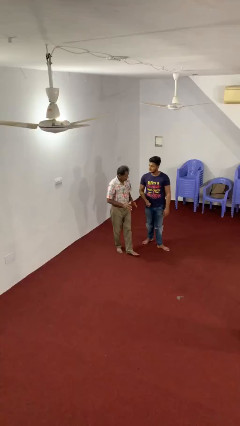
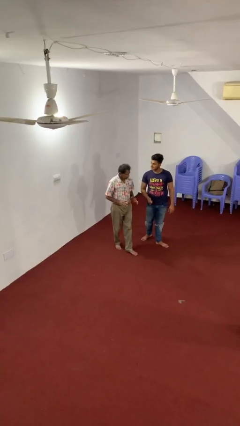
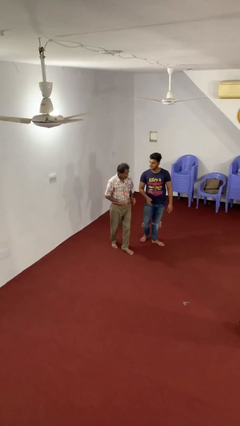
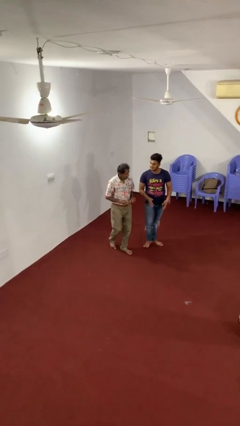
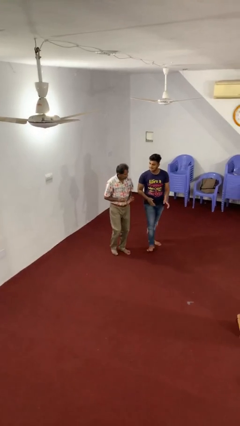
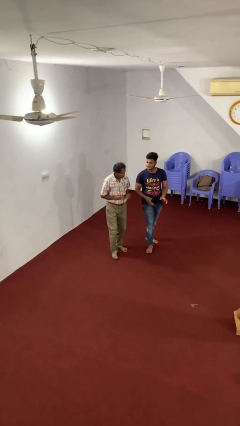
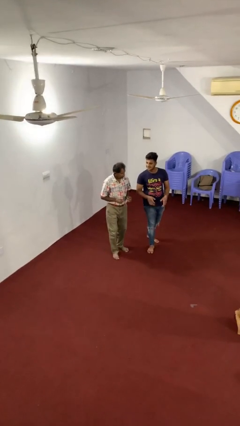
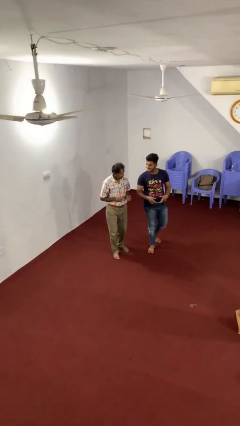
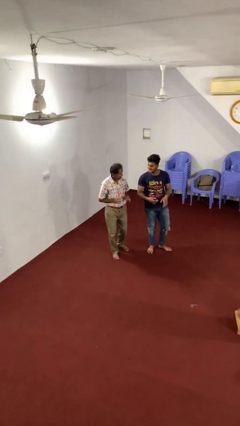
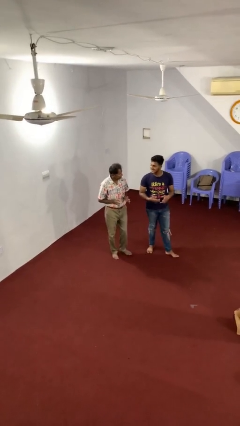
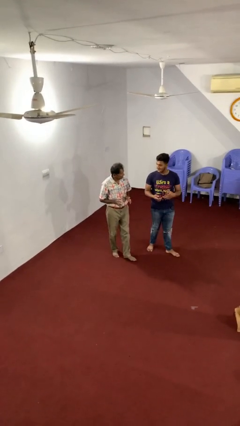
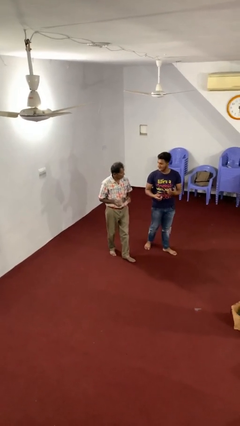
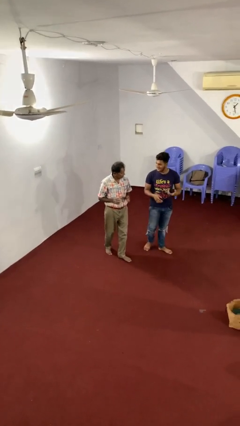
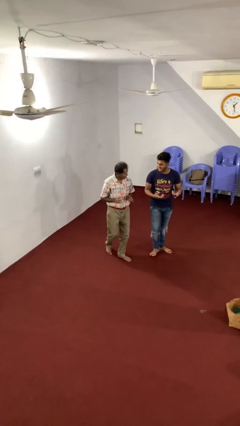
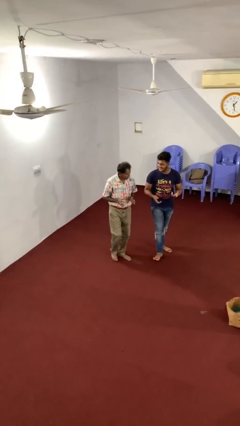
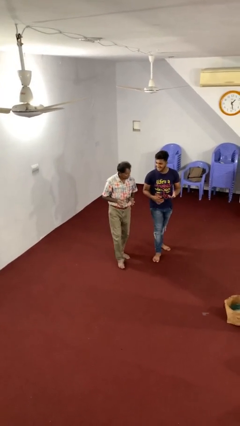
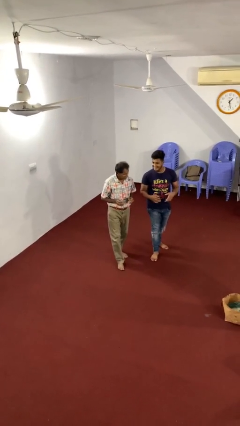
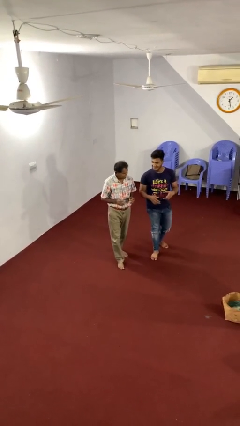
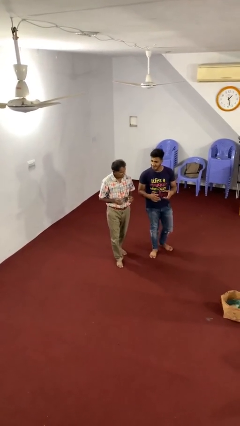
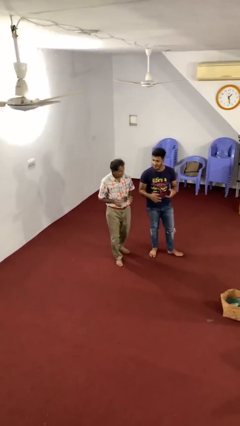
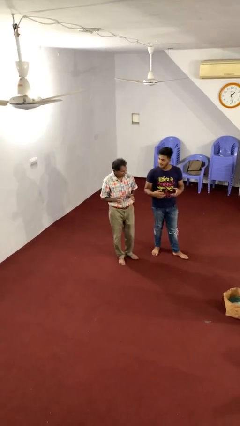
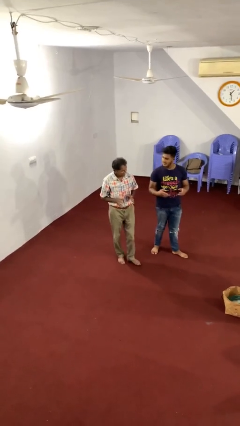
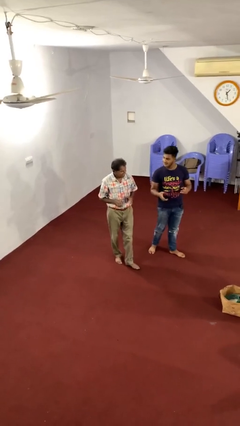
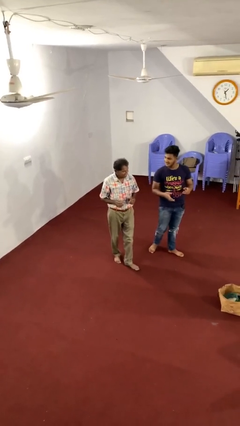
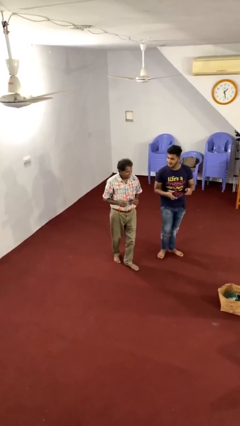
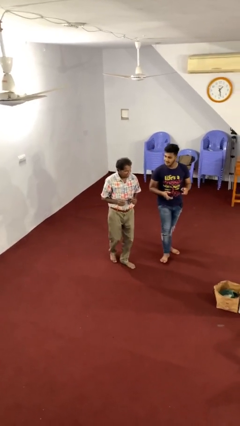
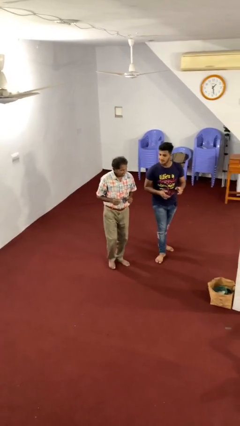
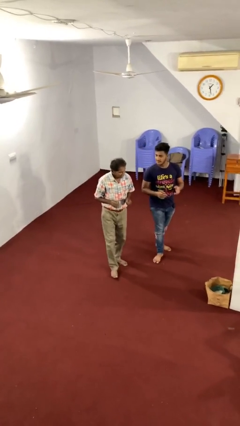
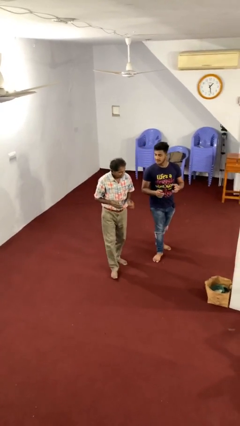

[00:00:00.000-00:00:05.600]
person talks to person

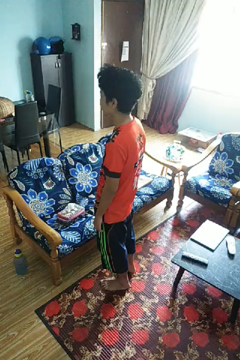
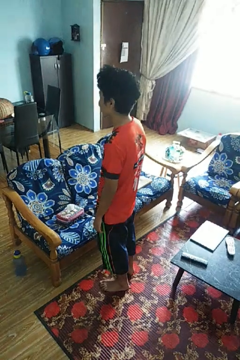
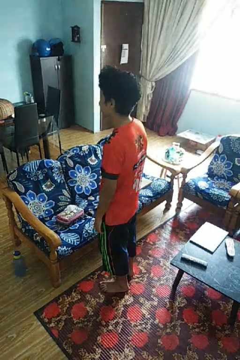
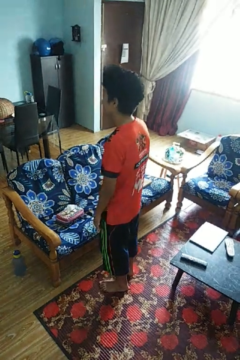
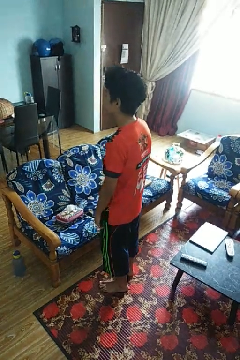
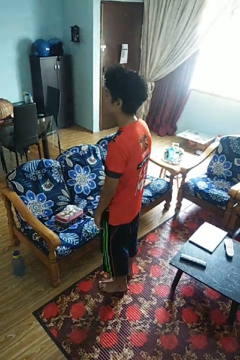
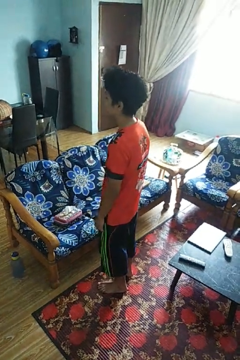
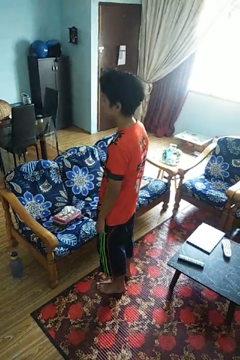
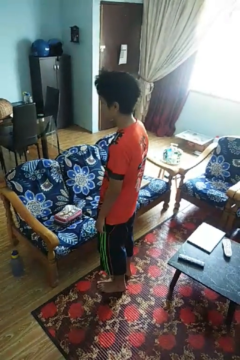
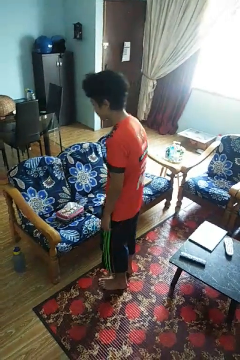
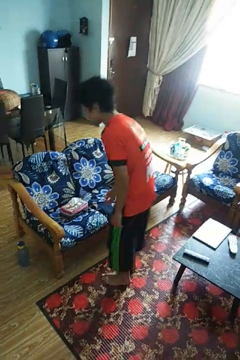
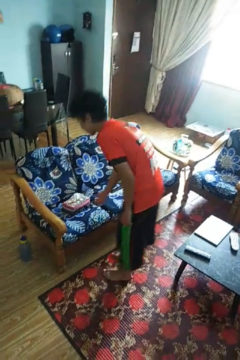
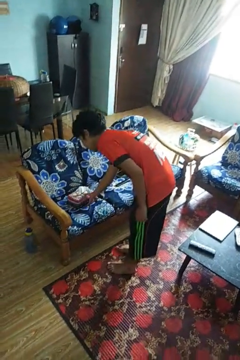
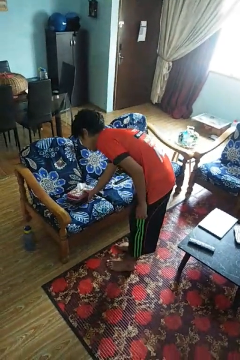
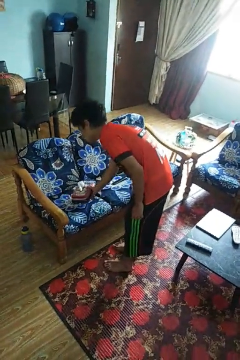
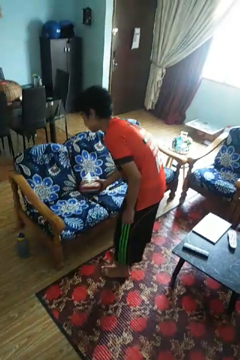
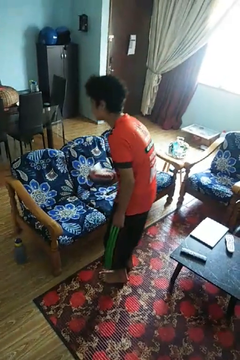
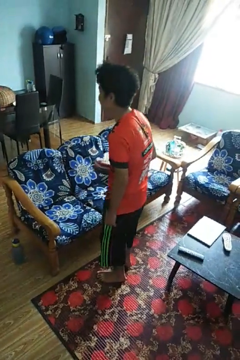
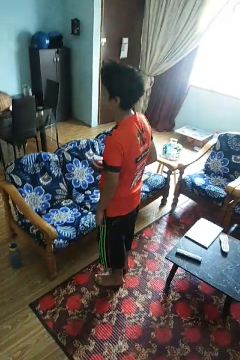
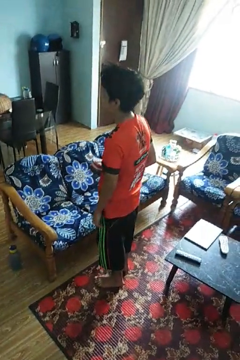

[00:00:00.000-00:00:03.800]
person picks up object from couch

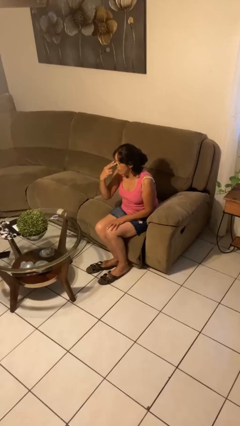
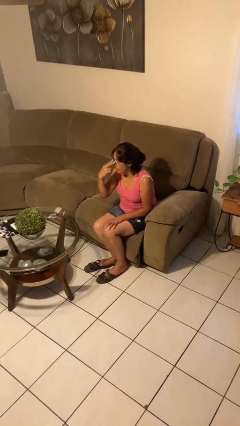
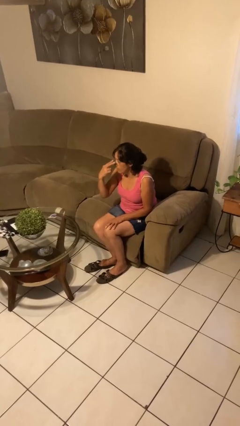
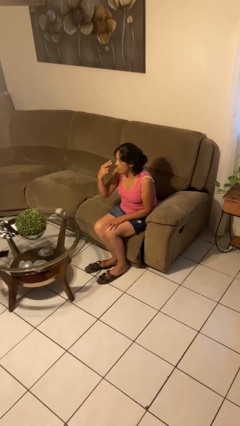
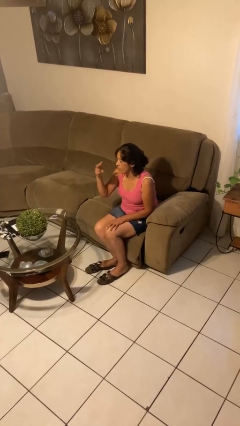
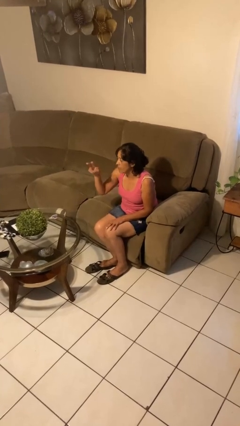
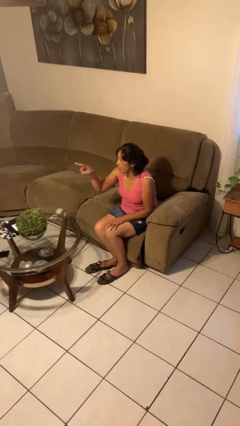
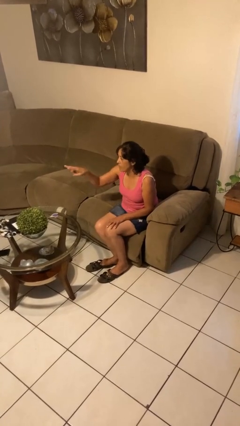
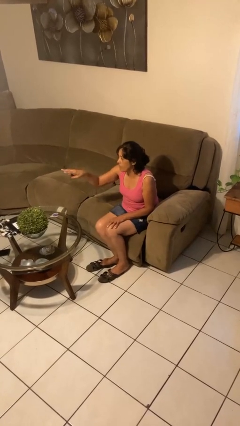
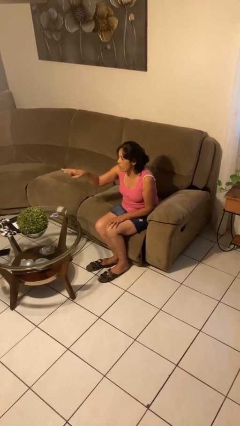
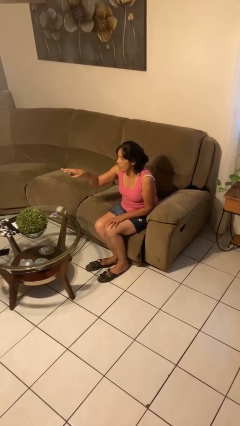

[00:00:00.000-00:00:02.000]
person gestures watch closely

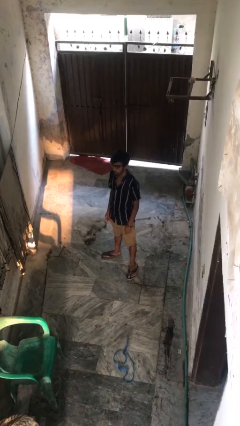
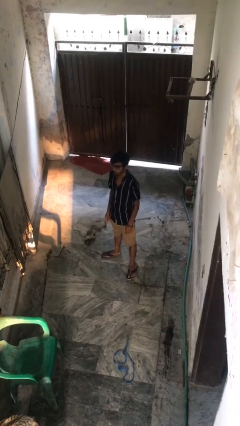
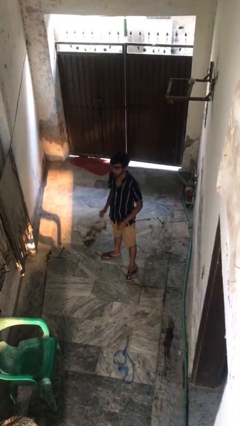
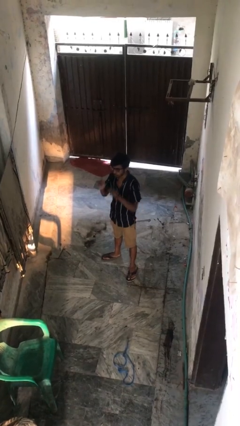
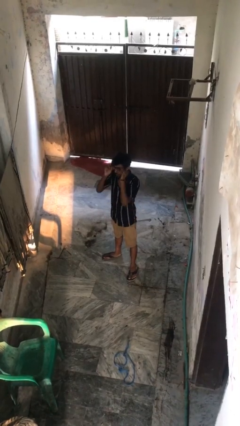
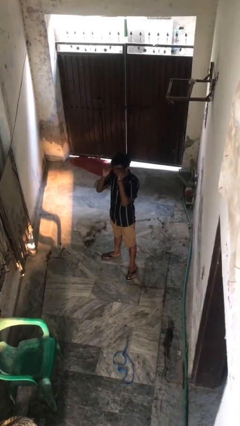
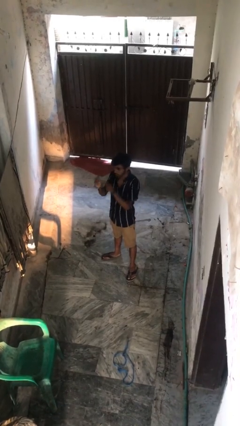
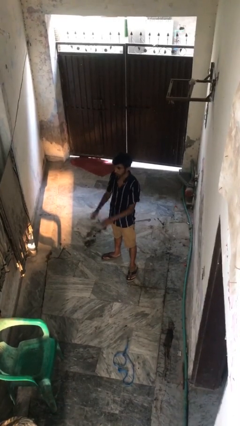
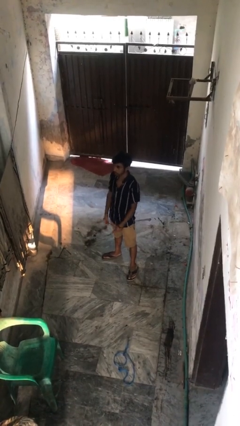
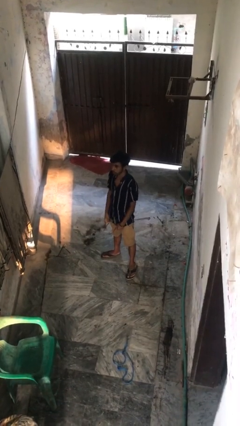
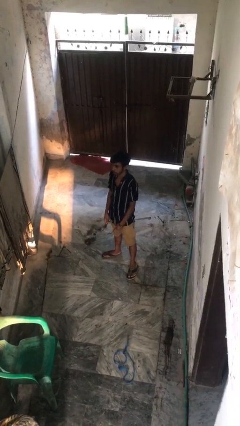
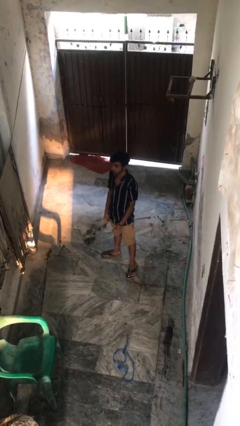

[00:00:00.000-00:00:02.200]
person takes off glasses

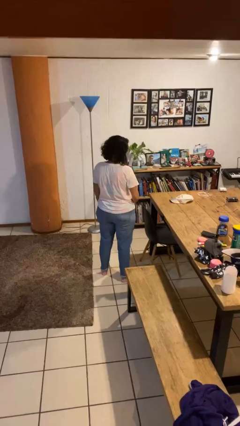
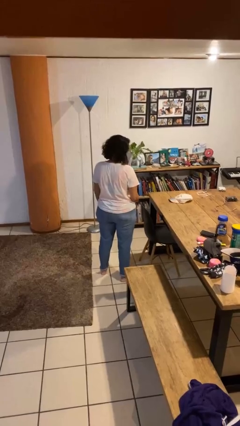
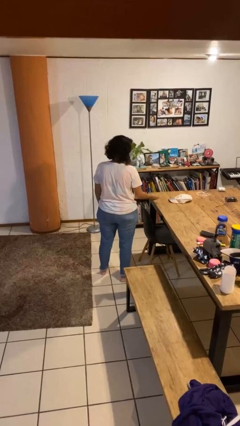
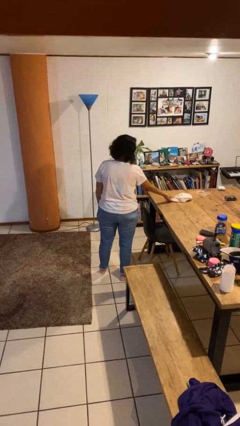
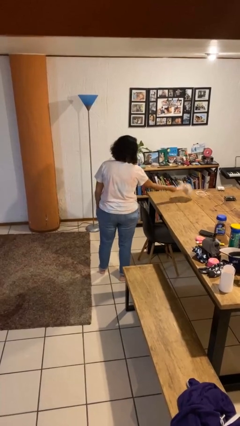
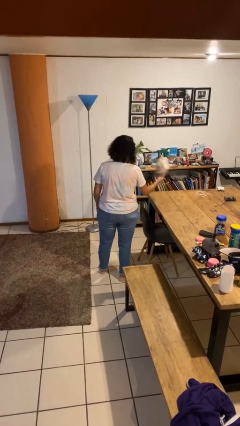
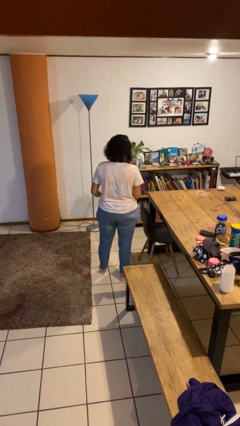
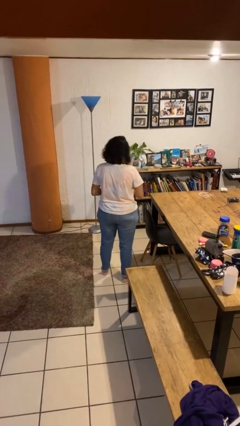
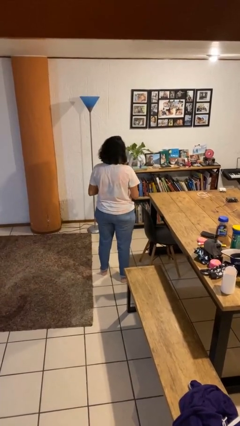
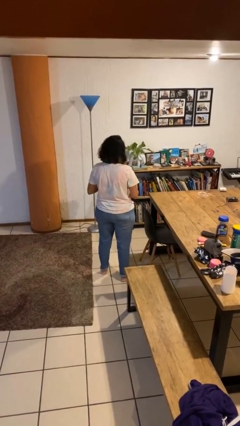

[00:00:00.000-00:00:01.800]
person picks up object from table

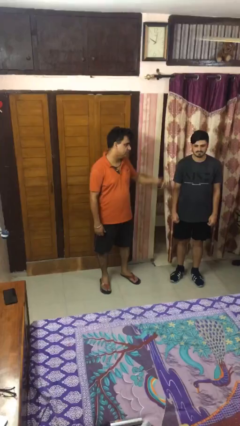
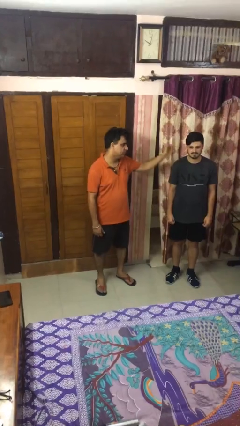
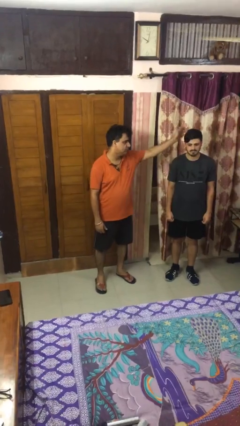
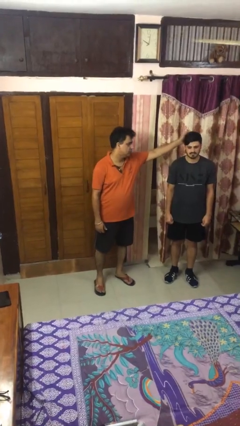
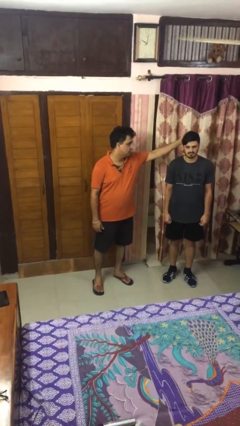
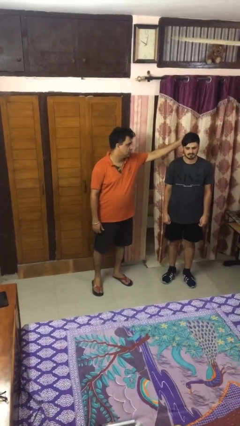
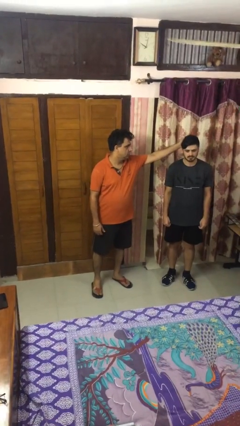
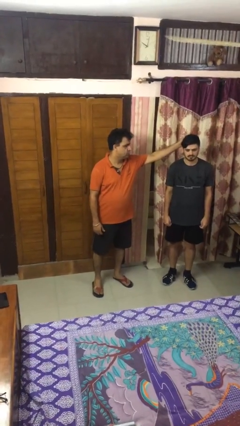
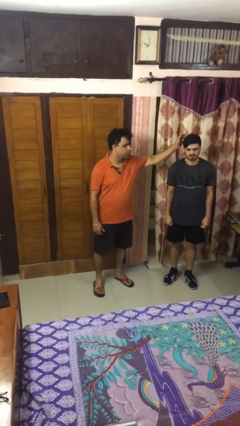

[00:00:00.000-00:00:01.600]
person grabs person by hair

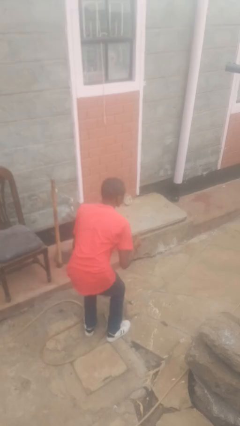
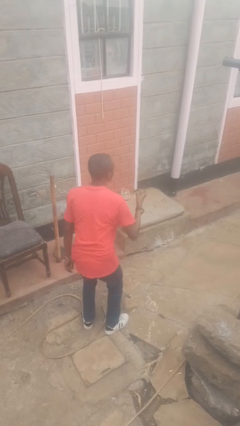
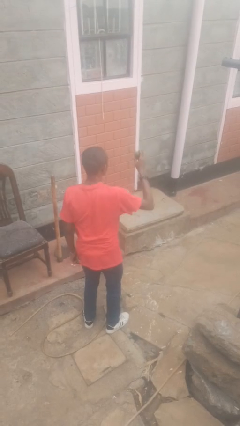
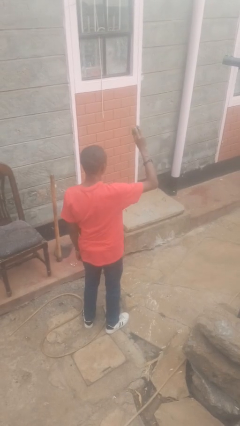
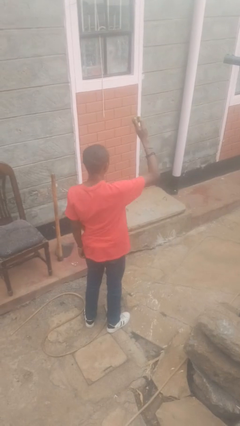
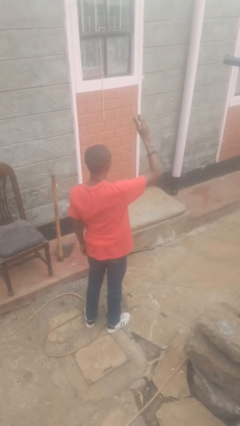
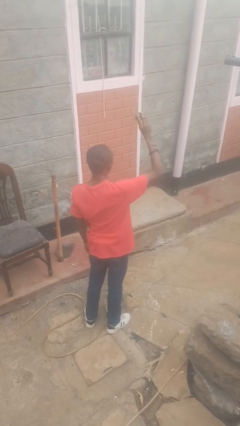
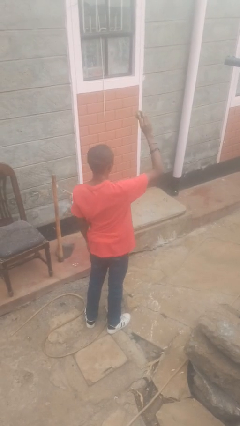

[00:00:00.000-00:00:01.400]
person catches dropped object
